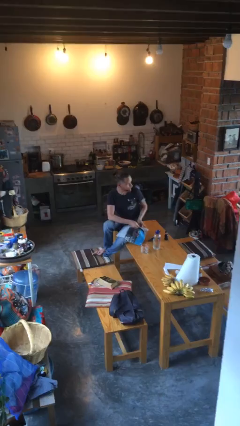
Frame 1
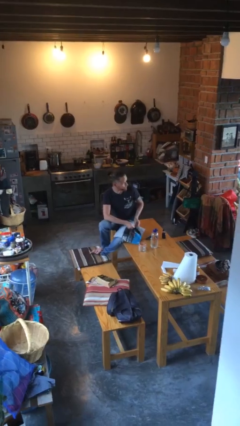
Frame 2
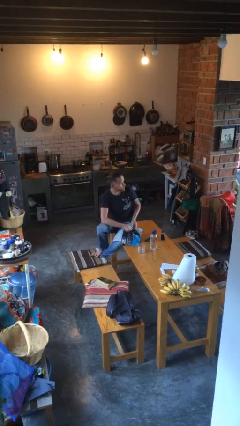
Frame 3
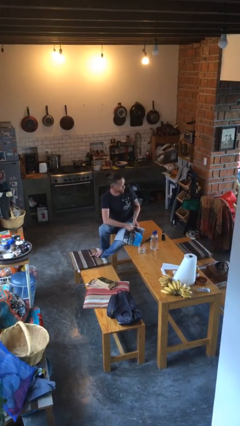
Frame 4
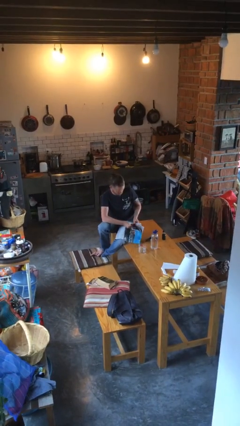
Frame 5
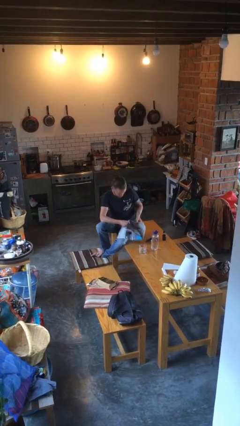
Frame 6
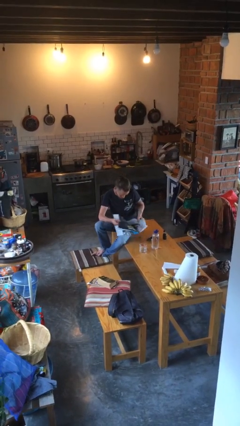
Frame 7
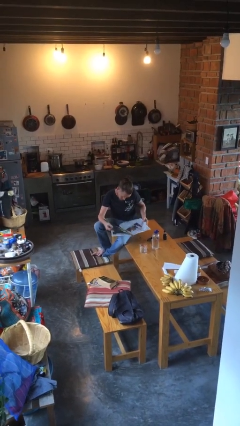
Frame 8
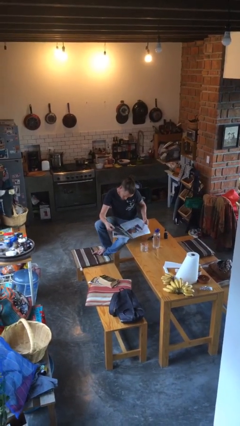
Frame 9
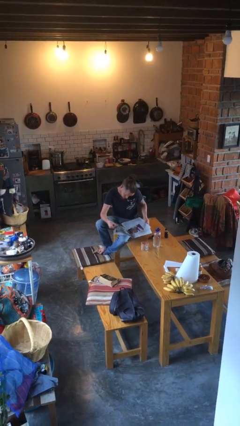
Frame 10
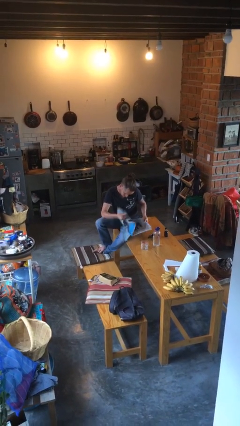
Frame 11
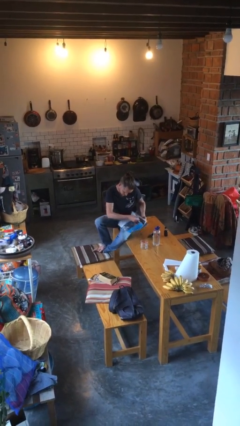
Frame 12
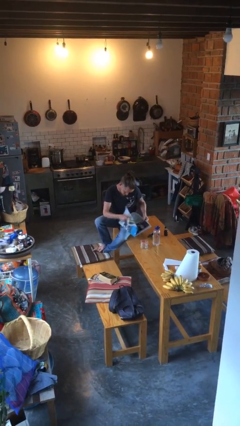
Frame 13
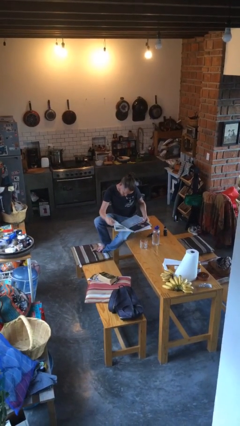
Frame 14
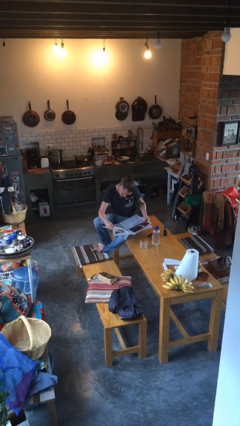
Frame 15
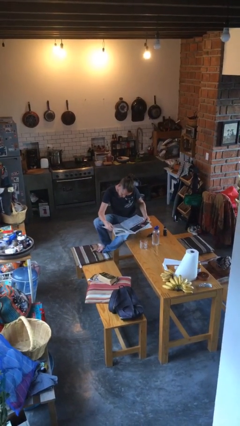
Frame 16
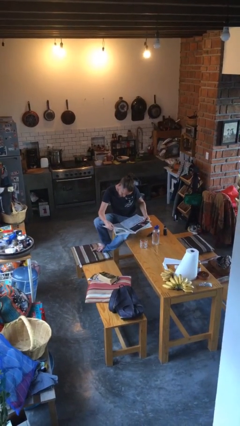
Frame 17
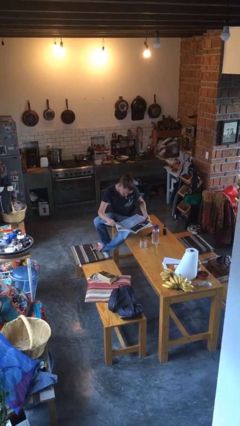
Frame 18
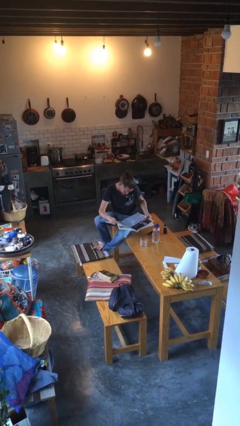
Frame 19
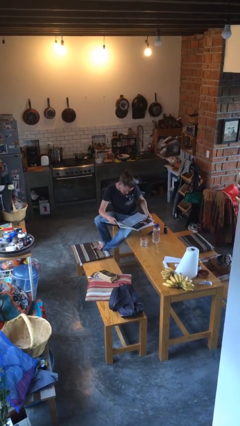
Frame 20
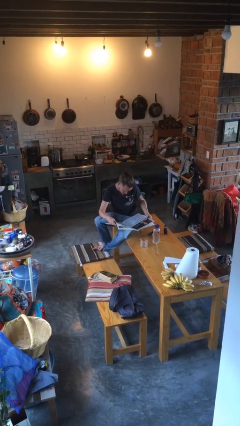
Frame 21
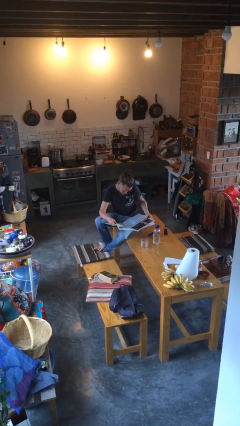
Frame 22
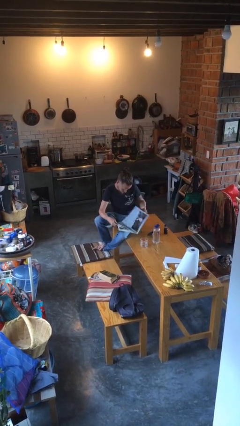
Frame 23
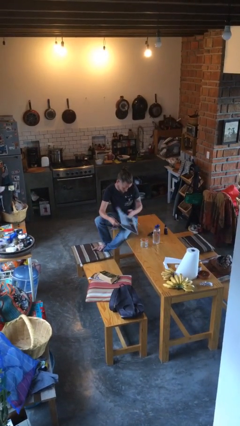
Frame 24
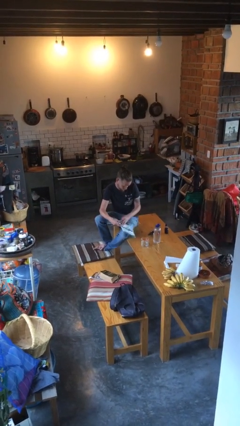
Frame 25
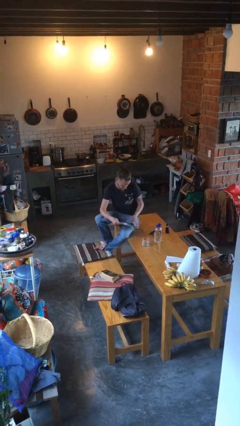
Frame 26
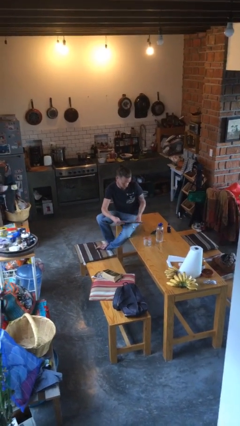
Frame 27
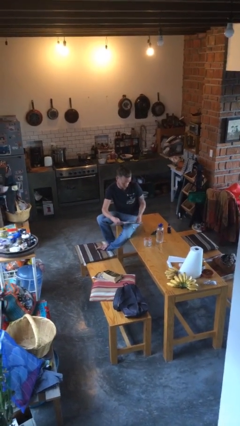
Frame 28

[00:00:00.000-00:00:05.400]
person reads newspaper

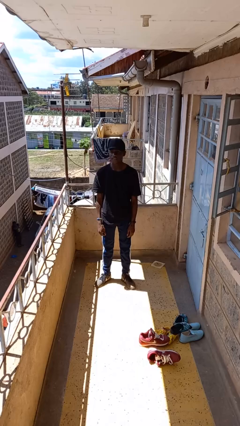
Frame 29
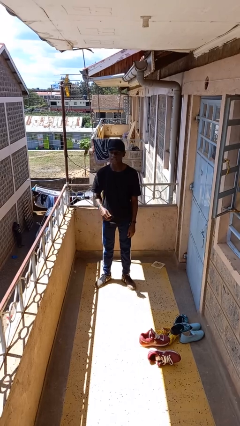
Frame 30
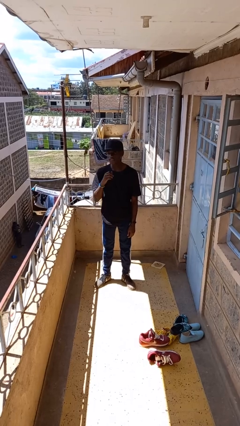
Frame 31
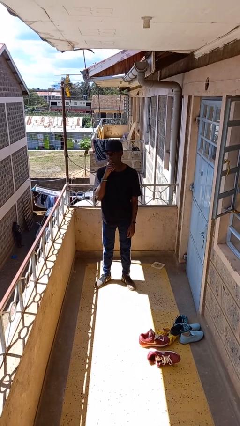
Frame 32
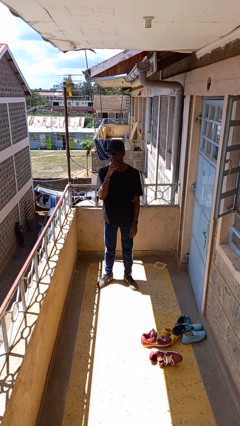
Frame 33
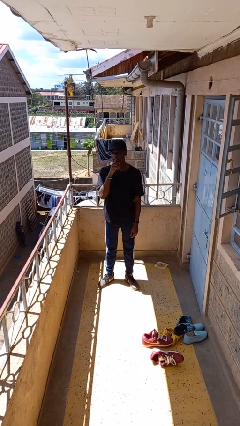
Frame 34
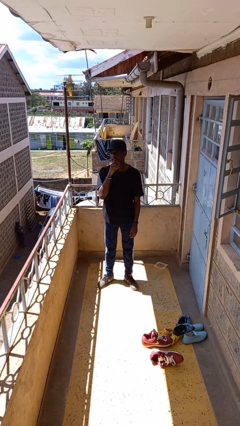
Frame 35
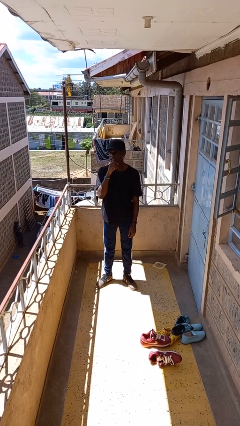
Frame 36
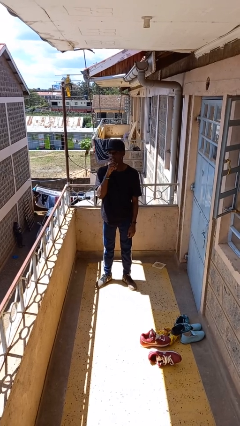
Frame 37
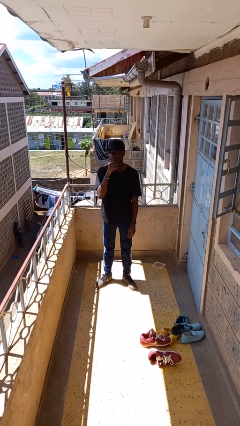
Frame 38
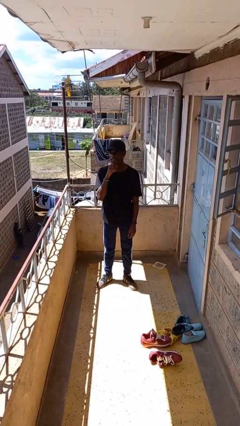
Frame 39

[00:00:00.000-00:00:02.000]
person strokes chin

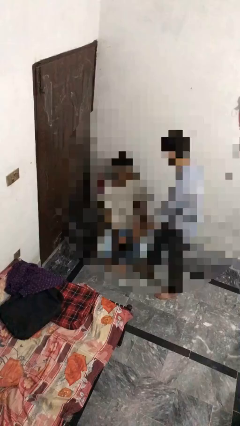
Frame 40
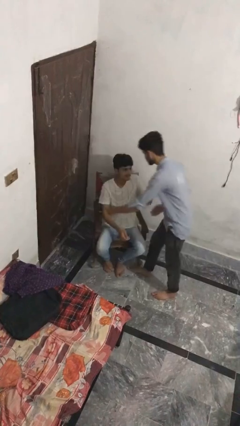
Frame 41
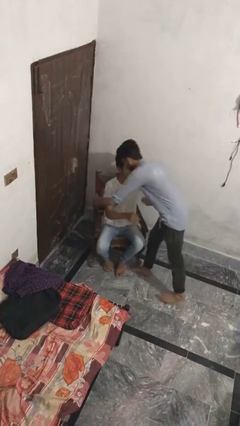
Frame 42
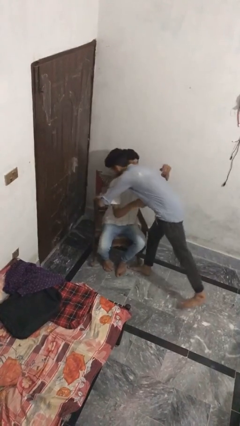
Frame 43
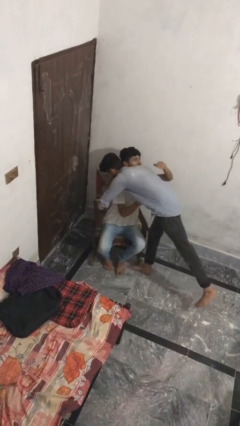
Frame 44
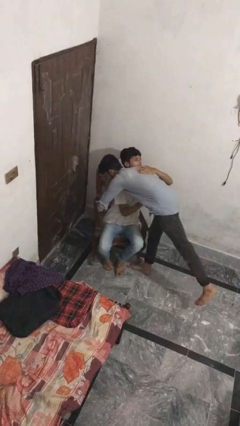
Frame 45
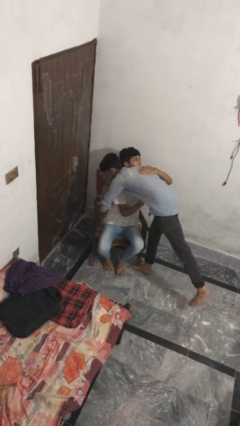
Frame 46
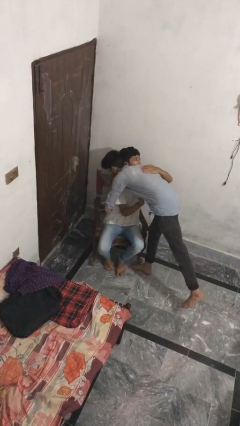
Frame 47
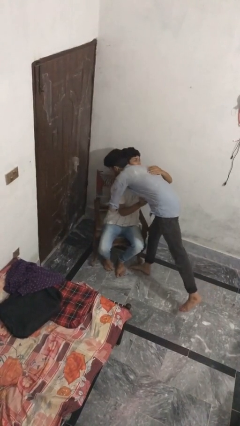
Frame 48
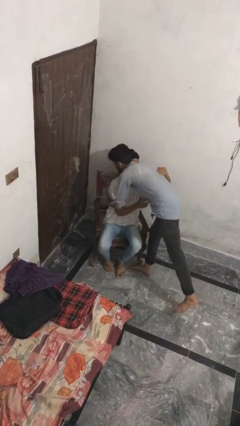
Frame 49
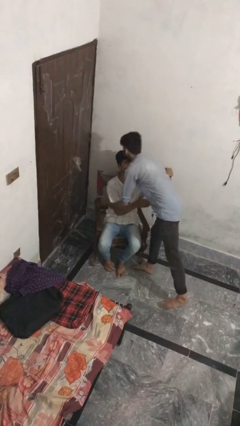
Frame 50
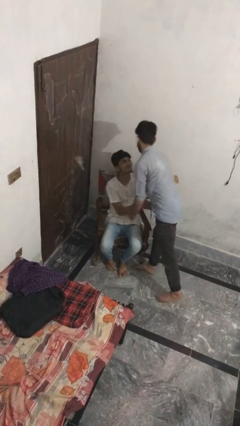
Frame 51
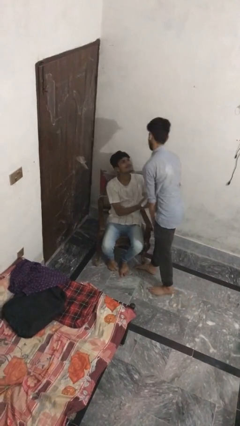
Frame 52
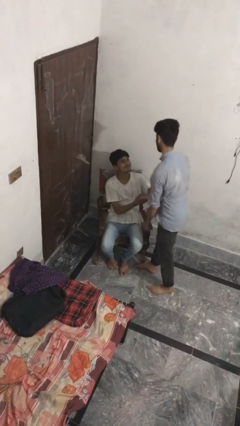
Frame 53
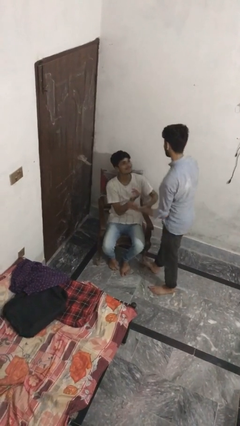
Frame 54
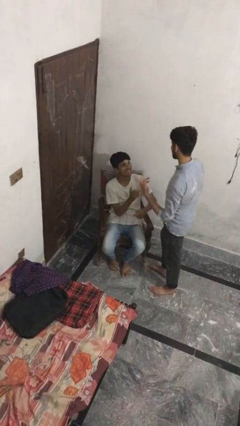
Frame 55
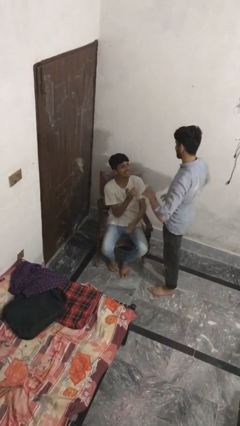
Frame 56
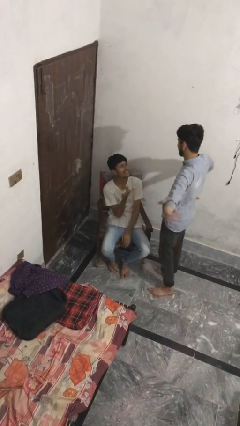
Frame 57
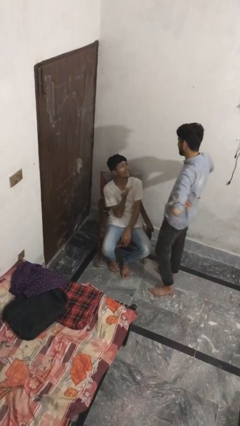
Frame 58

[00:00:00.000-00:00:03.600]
person embraces person

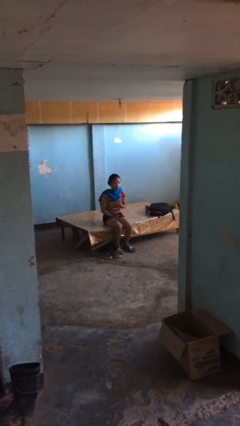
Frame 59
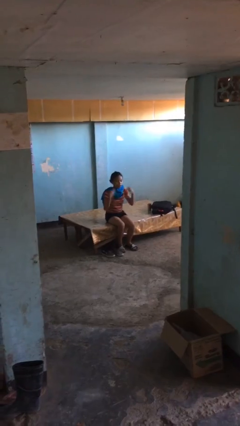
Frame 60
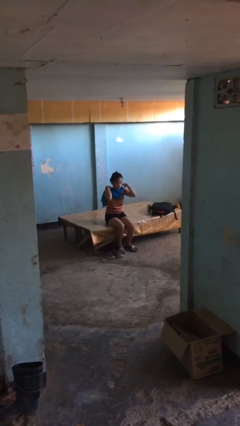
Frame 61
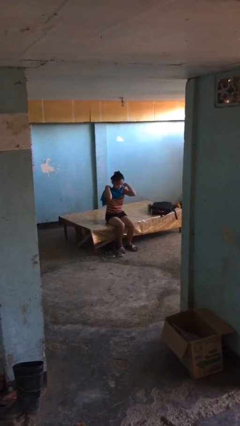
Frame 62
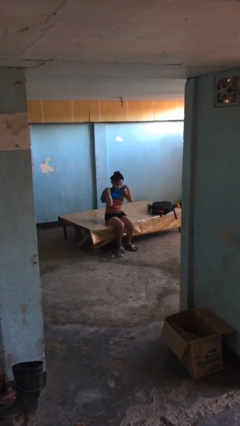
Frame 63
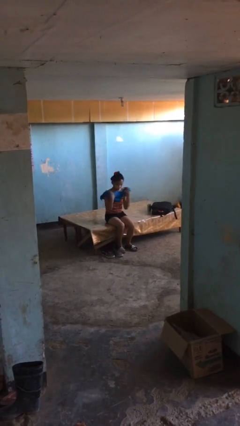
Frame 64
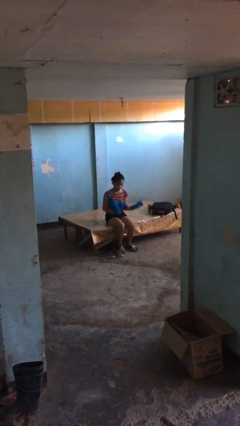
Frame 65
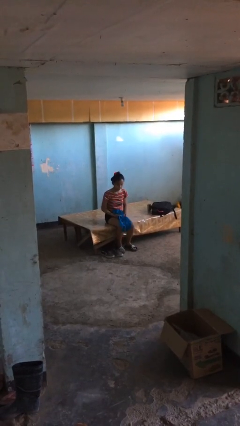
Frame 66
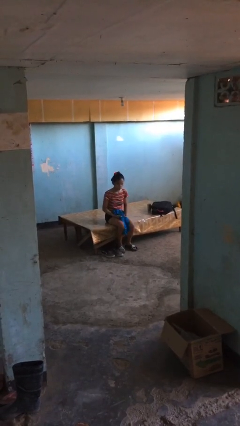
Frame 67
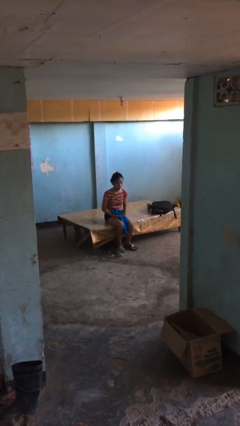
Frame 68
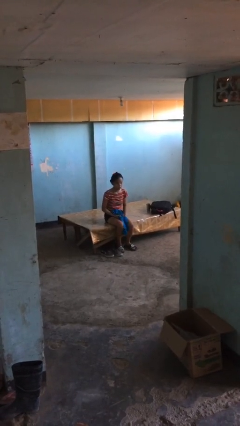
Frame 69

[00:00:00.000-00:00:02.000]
person takes off scarf

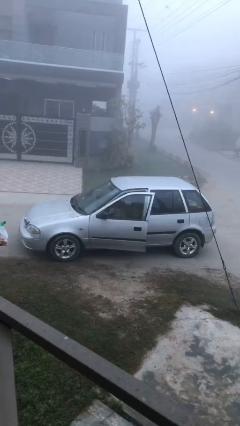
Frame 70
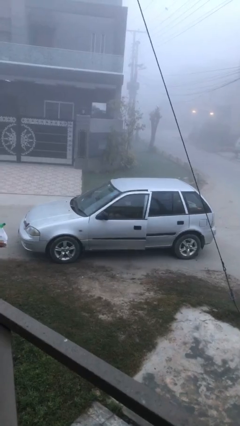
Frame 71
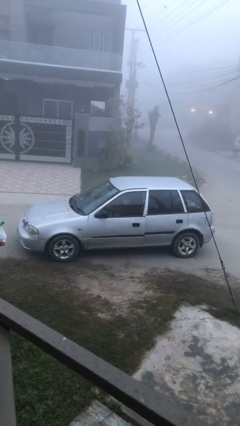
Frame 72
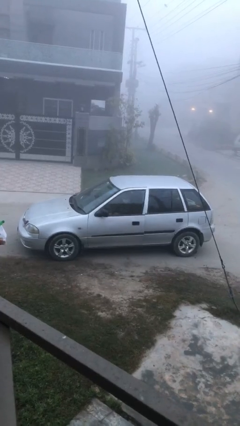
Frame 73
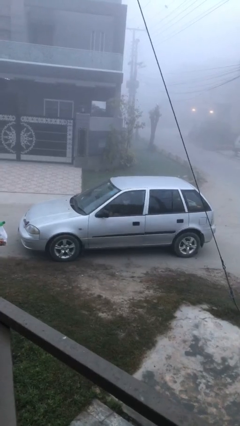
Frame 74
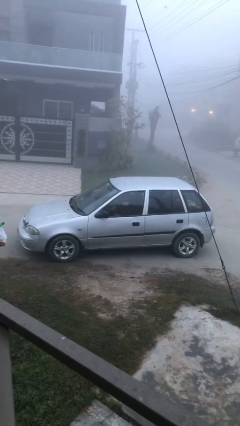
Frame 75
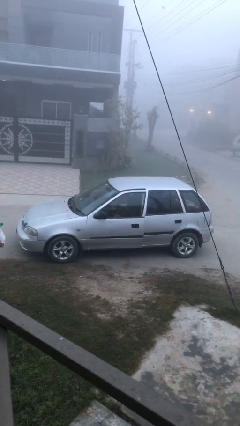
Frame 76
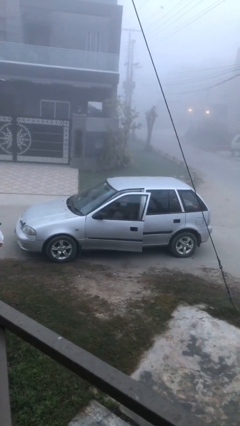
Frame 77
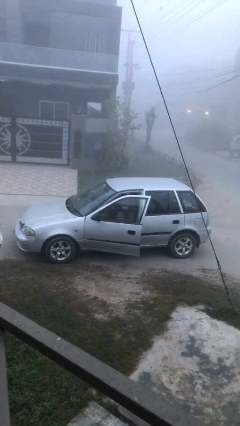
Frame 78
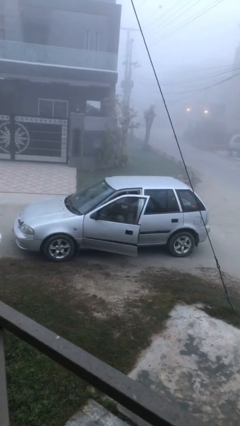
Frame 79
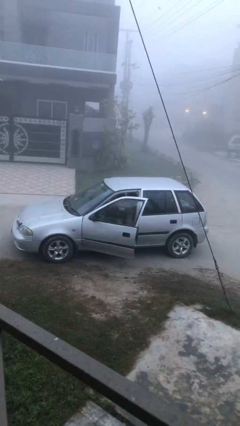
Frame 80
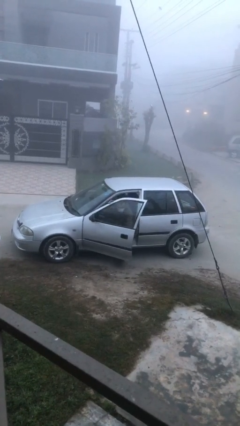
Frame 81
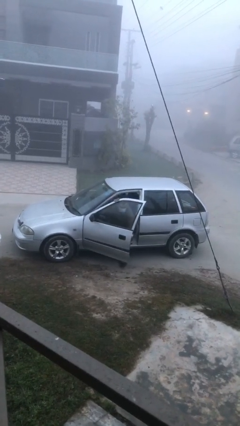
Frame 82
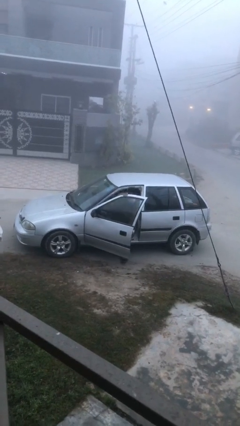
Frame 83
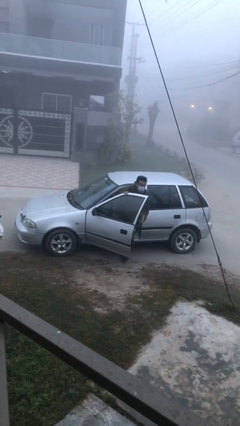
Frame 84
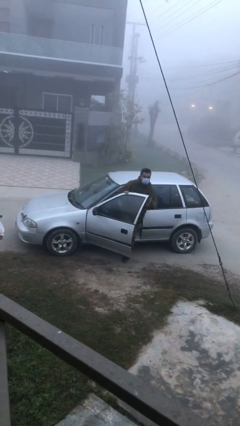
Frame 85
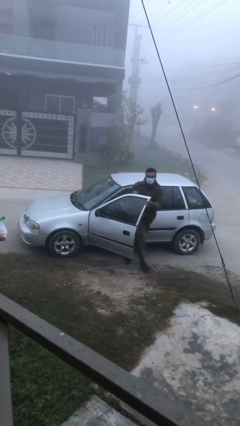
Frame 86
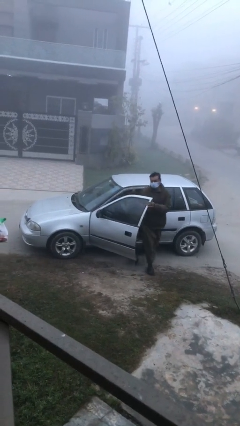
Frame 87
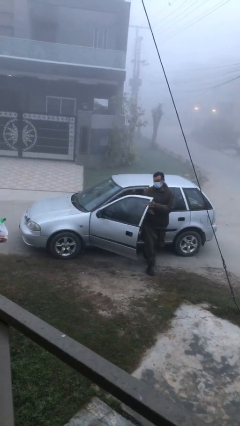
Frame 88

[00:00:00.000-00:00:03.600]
car drops off person

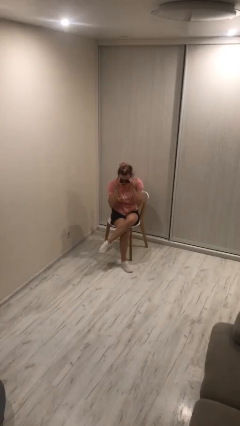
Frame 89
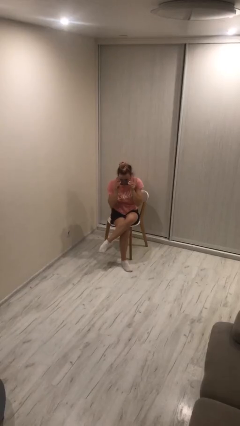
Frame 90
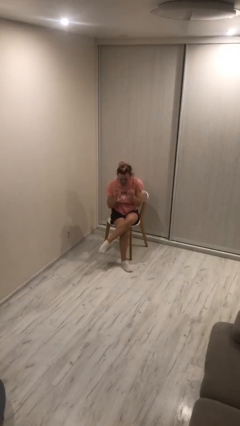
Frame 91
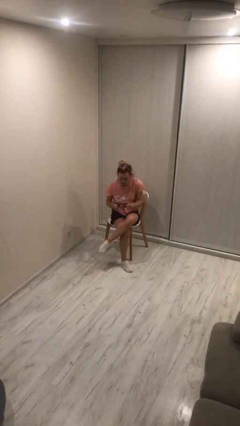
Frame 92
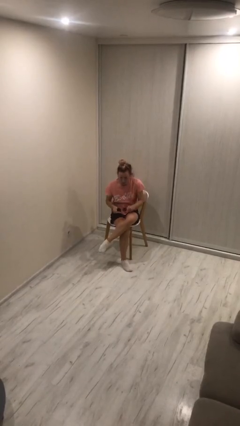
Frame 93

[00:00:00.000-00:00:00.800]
person takes off sunglasses

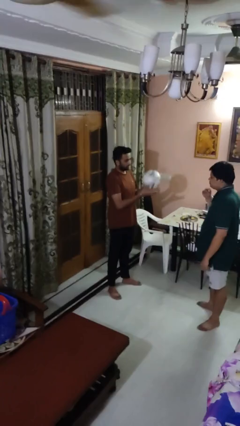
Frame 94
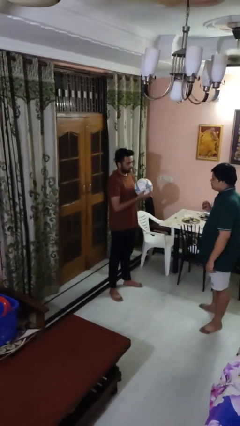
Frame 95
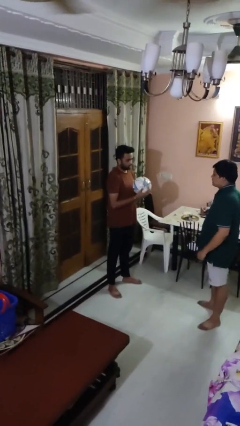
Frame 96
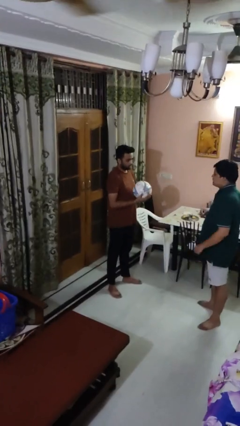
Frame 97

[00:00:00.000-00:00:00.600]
person catches object from person
